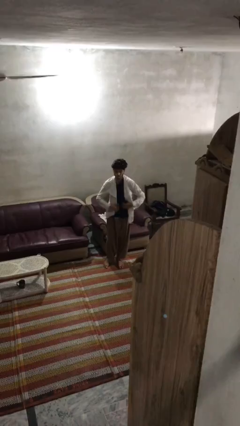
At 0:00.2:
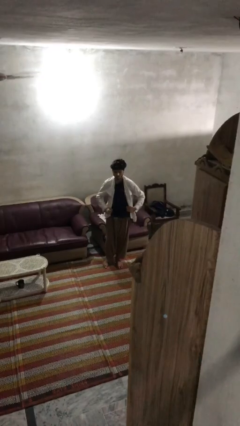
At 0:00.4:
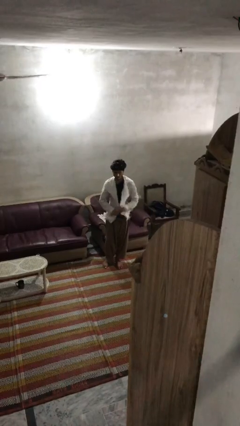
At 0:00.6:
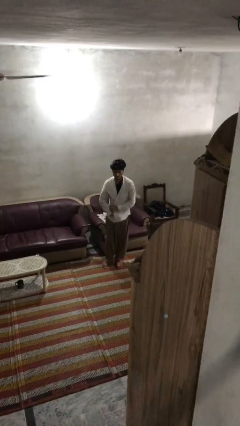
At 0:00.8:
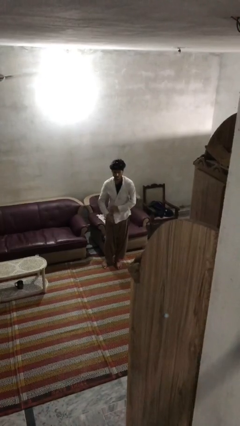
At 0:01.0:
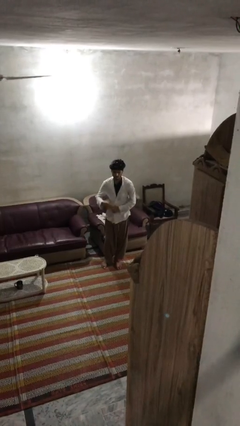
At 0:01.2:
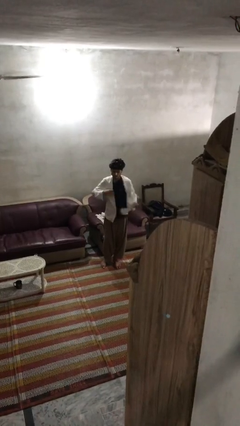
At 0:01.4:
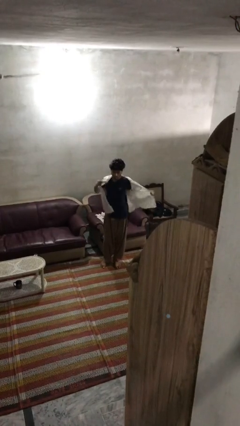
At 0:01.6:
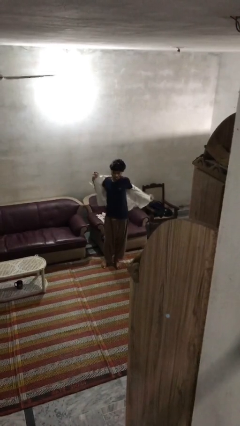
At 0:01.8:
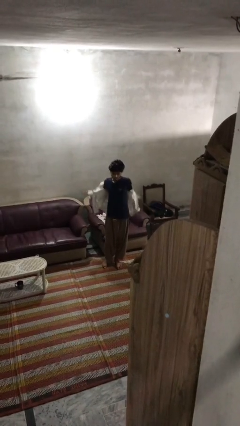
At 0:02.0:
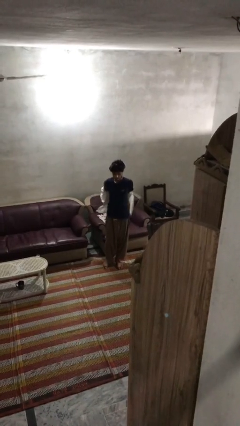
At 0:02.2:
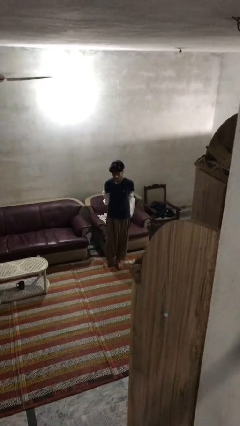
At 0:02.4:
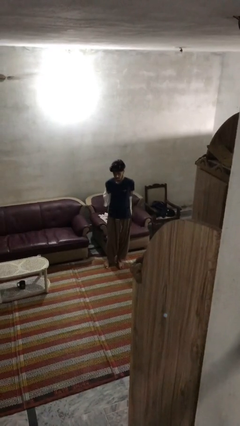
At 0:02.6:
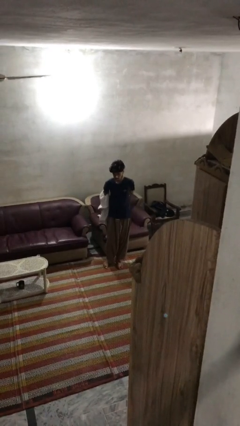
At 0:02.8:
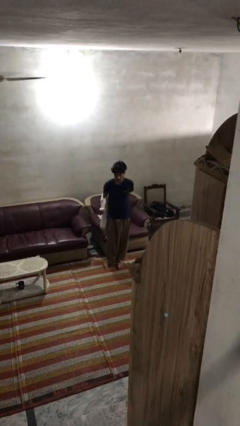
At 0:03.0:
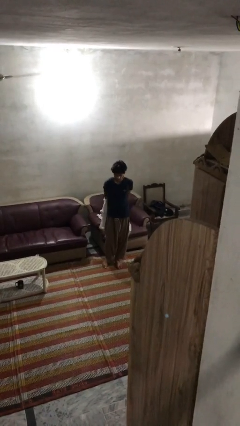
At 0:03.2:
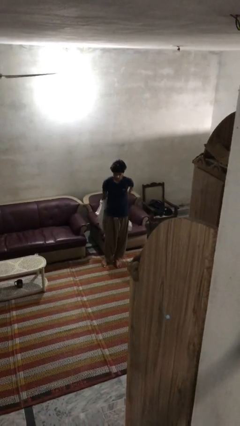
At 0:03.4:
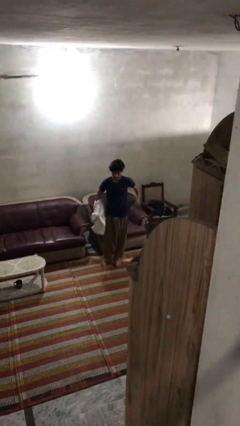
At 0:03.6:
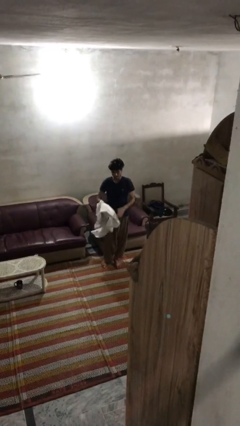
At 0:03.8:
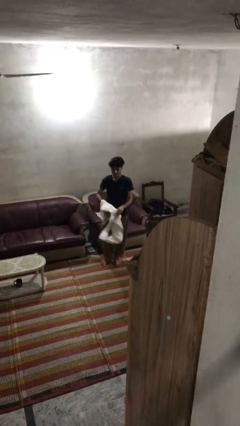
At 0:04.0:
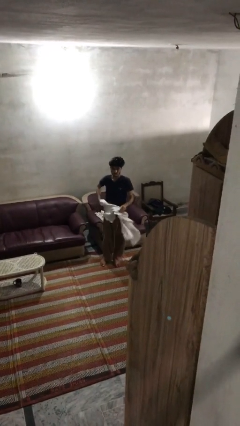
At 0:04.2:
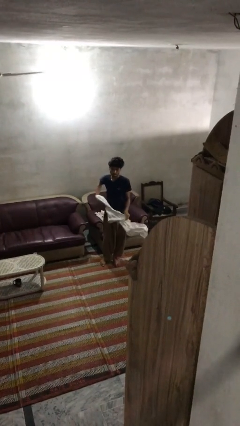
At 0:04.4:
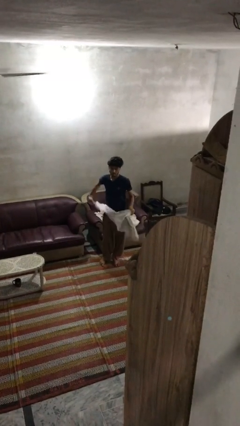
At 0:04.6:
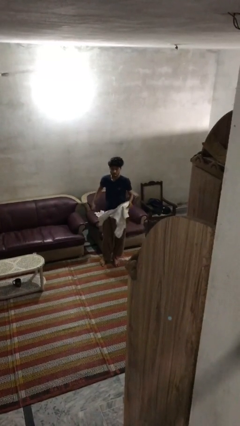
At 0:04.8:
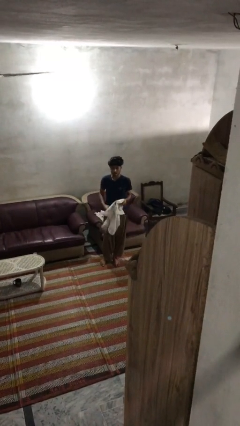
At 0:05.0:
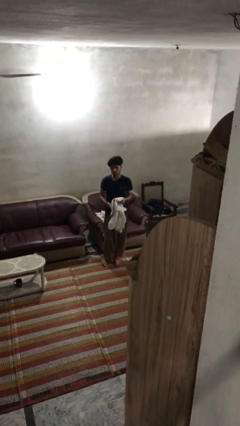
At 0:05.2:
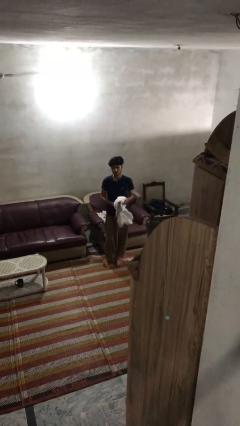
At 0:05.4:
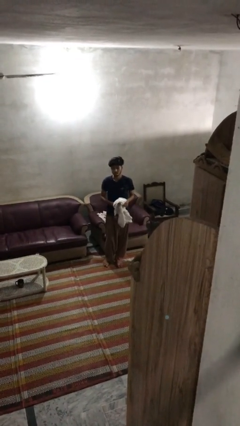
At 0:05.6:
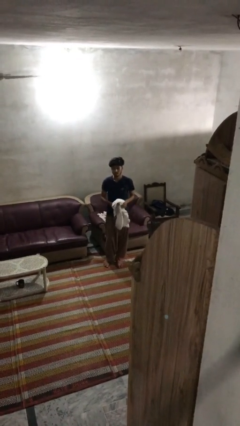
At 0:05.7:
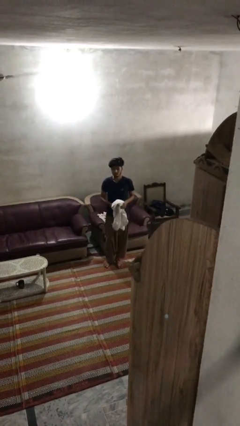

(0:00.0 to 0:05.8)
person takes off shirt

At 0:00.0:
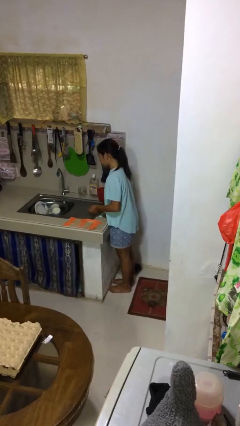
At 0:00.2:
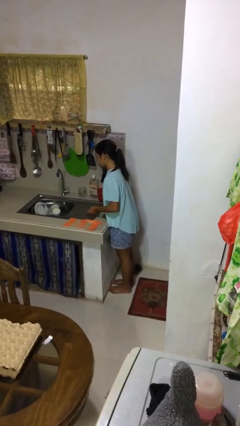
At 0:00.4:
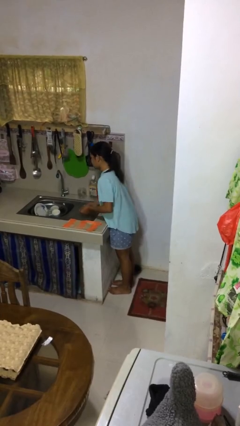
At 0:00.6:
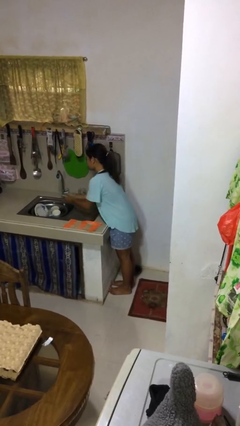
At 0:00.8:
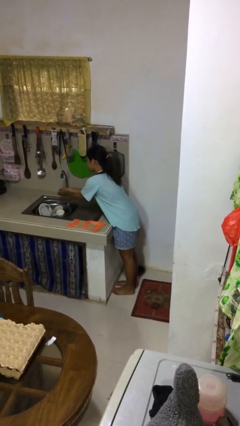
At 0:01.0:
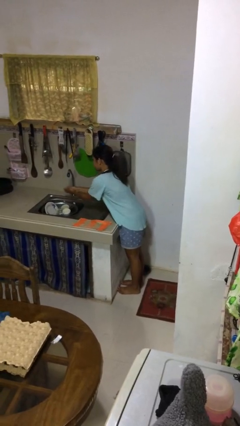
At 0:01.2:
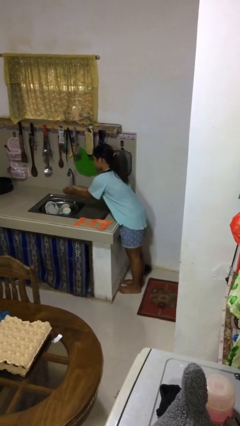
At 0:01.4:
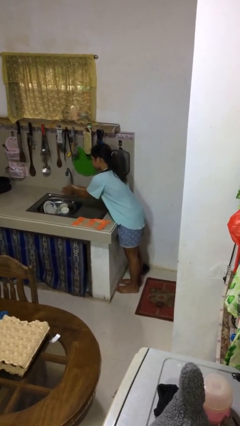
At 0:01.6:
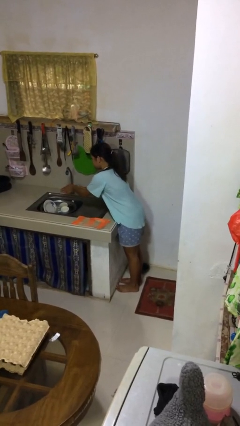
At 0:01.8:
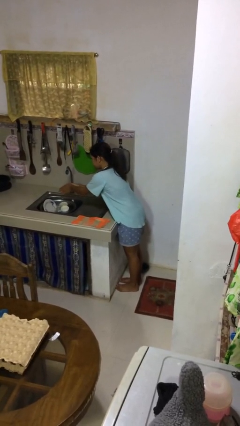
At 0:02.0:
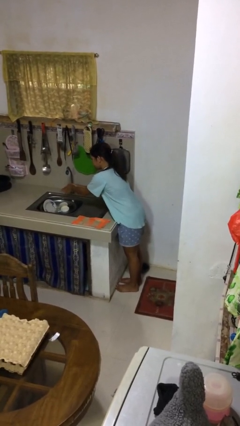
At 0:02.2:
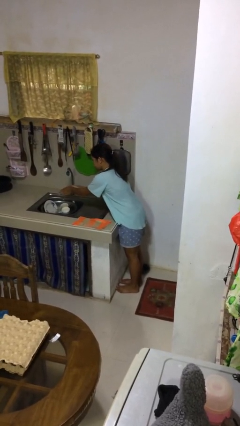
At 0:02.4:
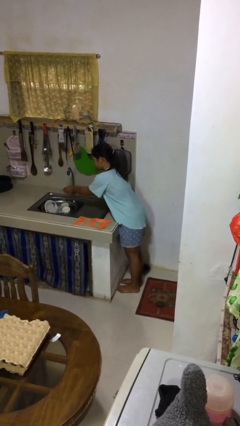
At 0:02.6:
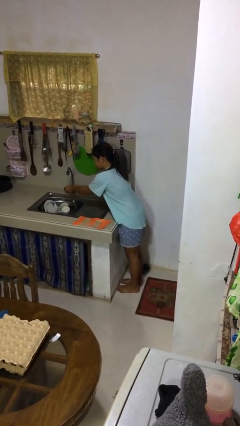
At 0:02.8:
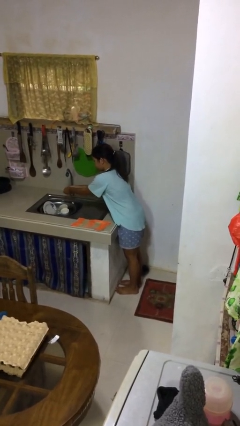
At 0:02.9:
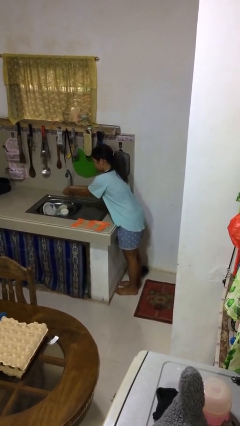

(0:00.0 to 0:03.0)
person washes hands

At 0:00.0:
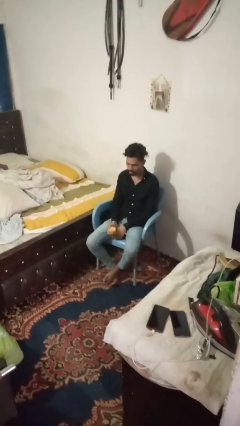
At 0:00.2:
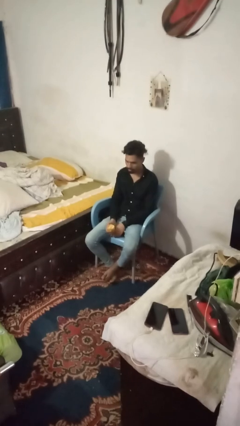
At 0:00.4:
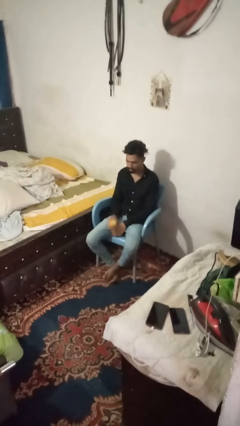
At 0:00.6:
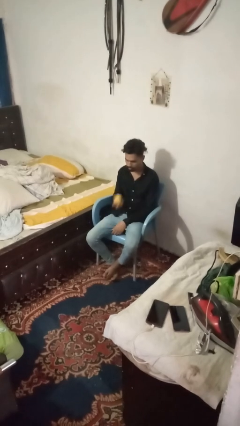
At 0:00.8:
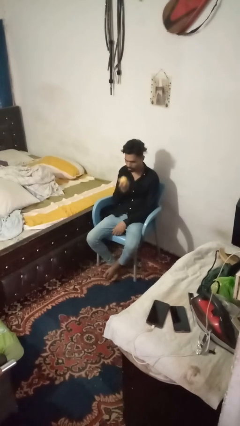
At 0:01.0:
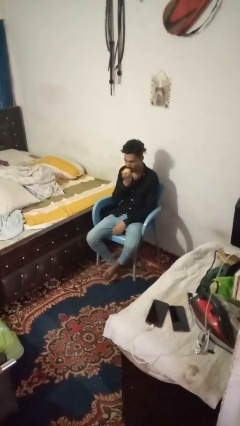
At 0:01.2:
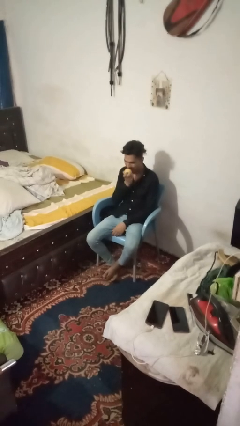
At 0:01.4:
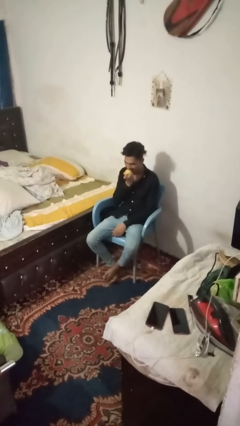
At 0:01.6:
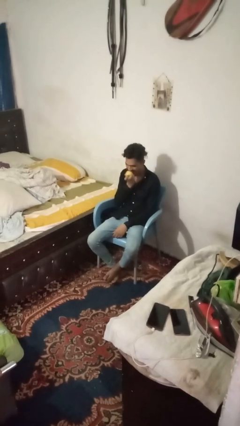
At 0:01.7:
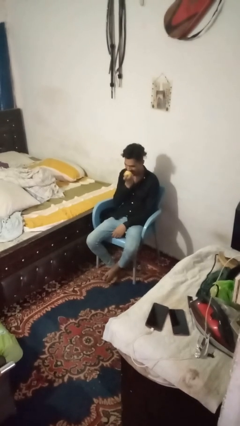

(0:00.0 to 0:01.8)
person eats apple

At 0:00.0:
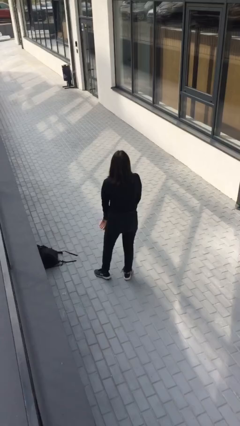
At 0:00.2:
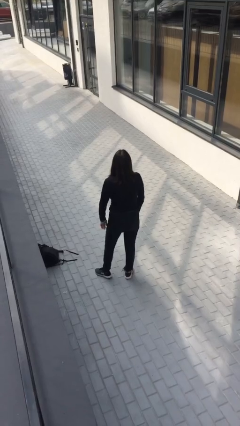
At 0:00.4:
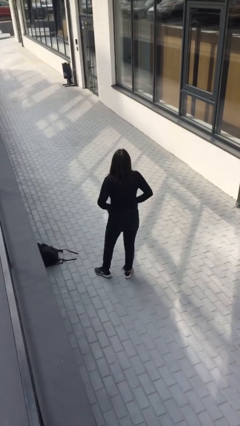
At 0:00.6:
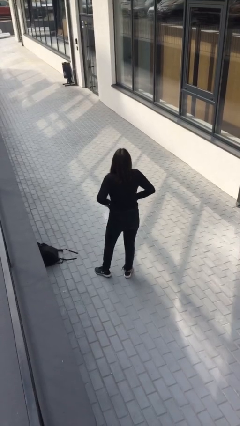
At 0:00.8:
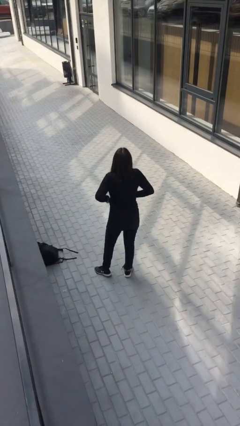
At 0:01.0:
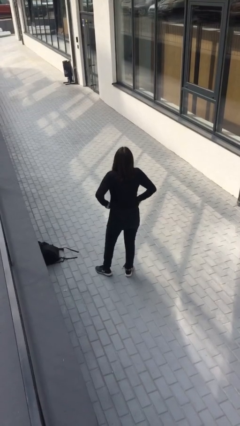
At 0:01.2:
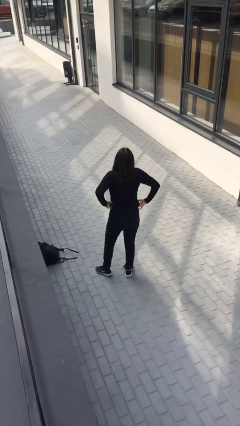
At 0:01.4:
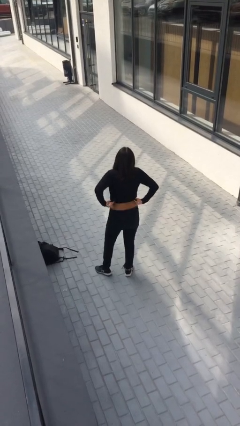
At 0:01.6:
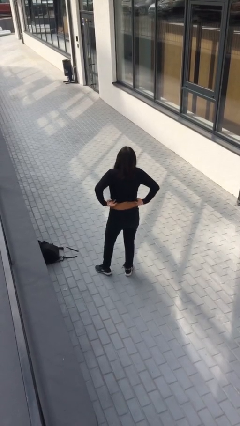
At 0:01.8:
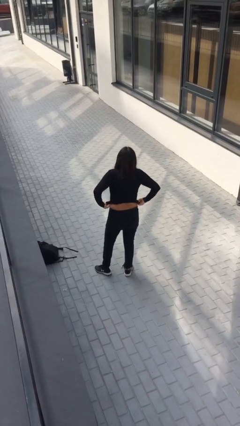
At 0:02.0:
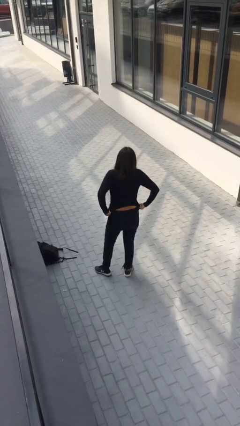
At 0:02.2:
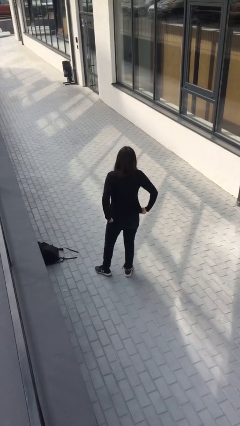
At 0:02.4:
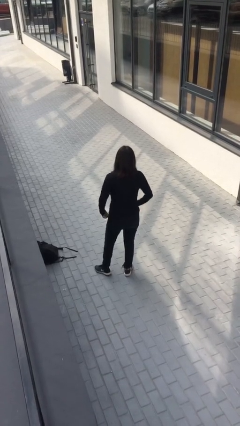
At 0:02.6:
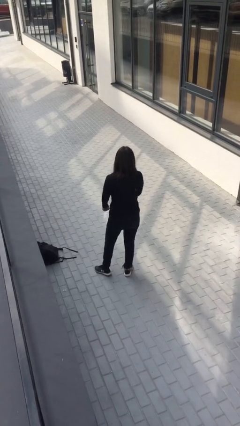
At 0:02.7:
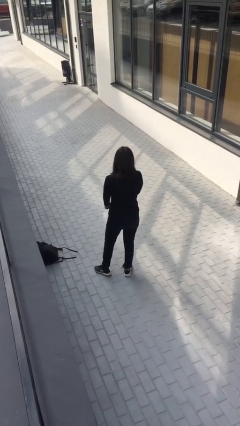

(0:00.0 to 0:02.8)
person untucks shirt

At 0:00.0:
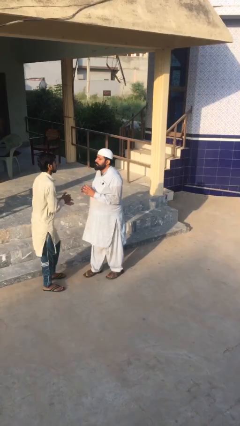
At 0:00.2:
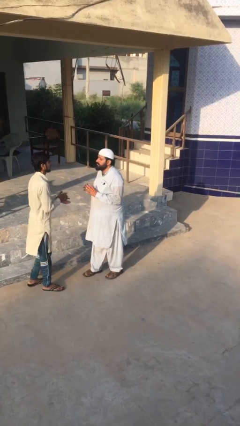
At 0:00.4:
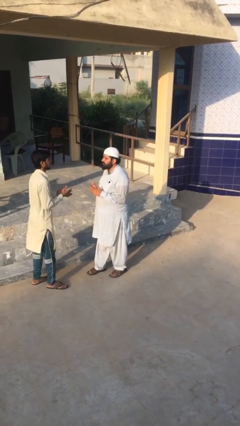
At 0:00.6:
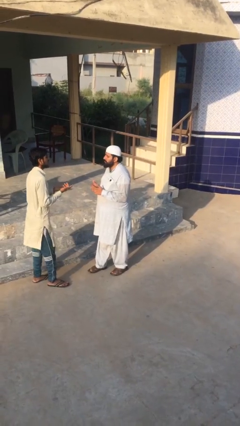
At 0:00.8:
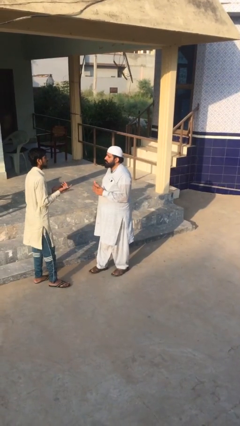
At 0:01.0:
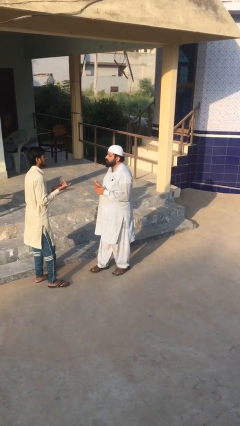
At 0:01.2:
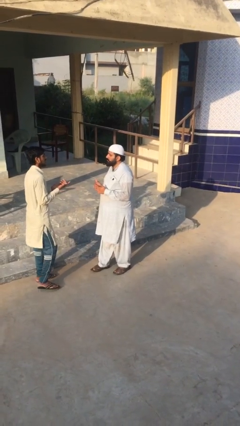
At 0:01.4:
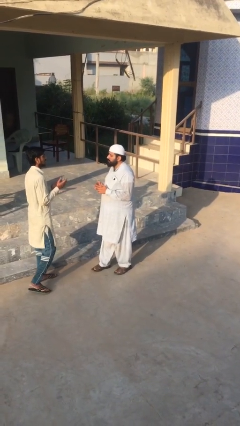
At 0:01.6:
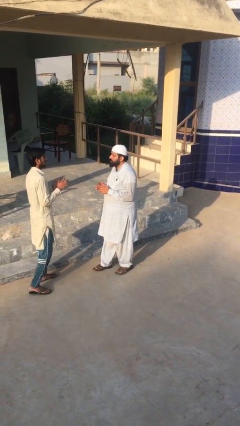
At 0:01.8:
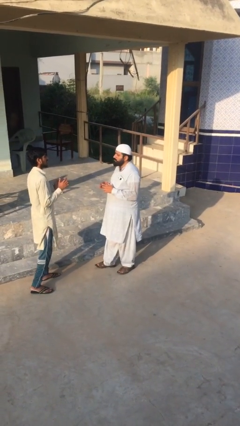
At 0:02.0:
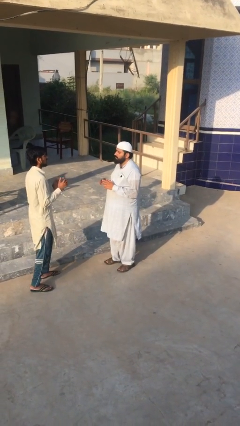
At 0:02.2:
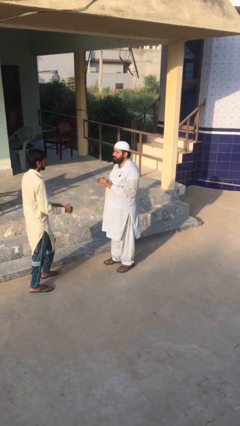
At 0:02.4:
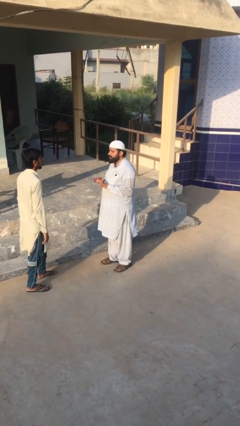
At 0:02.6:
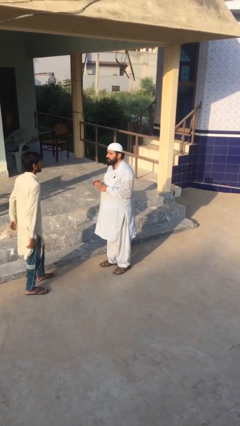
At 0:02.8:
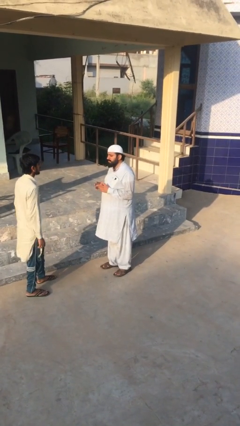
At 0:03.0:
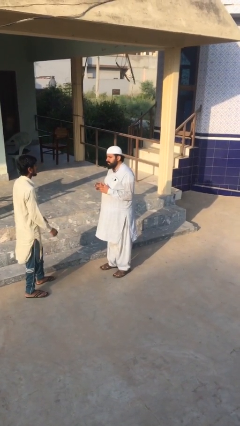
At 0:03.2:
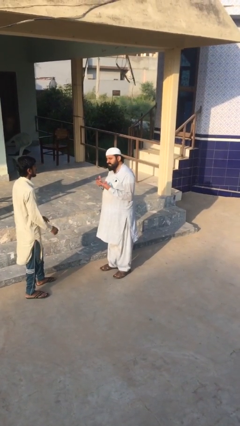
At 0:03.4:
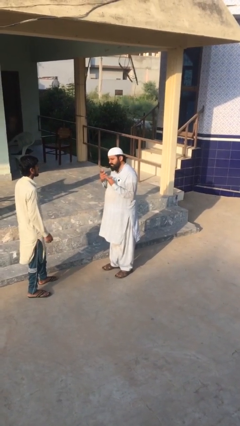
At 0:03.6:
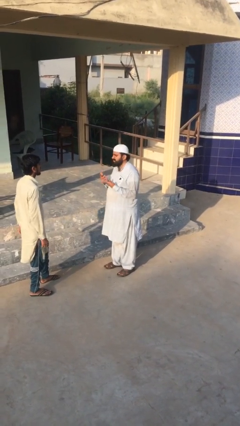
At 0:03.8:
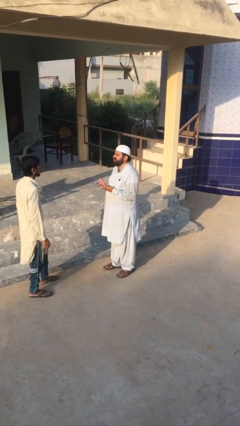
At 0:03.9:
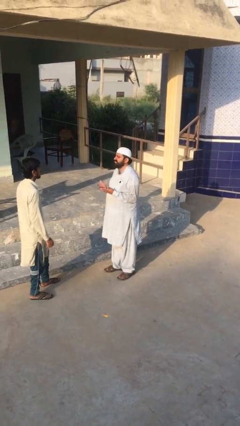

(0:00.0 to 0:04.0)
person talks to person

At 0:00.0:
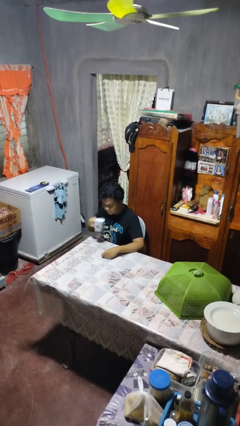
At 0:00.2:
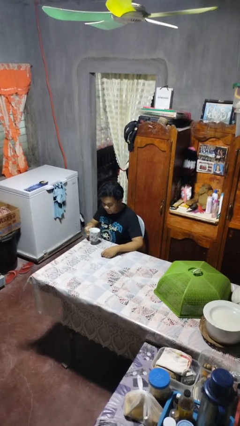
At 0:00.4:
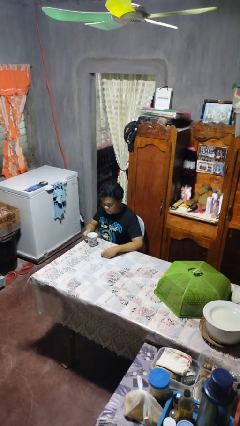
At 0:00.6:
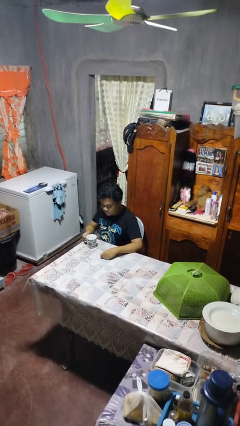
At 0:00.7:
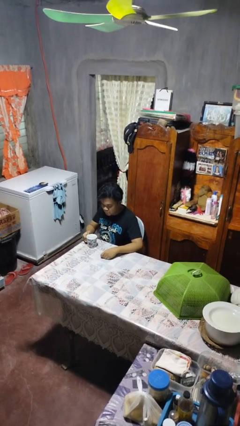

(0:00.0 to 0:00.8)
person puts down object on table
